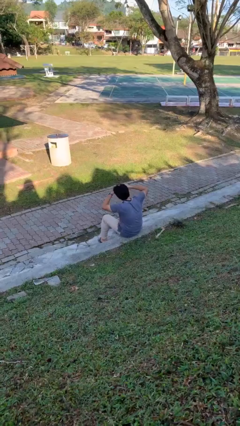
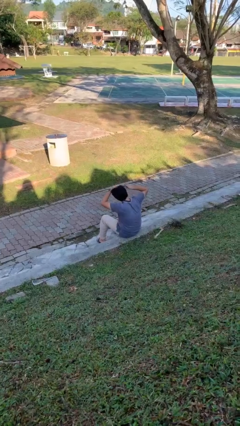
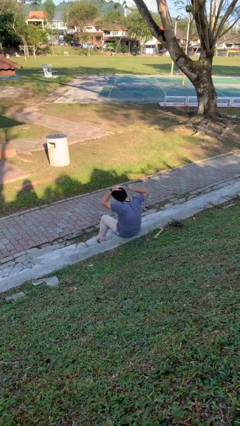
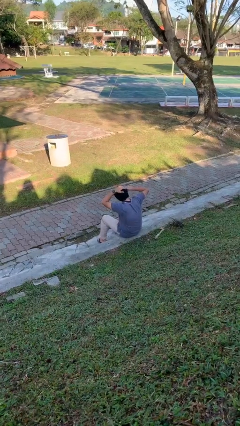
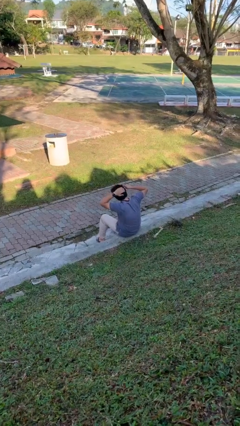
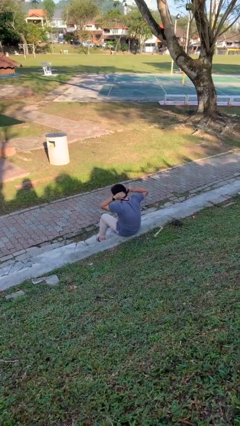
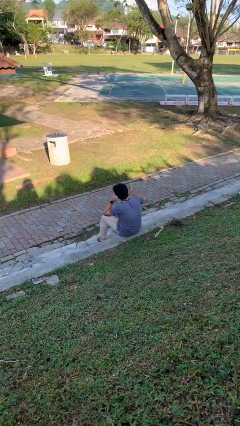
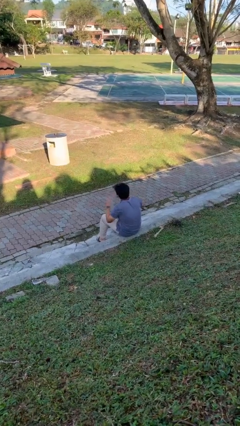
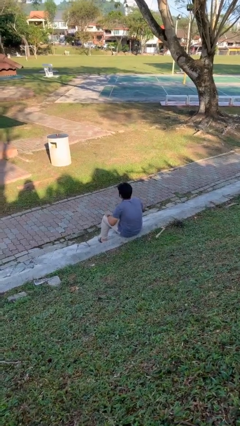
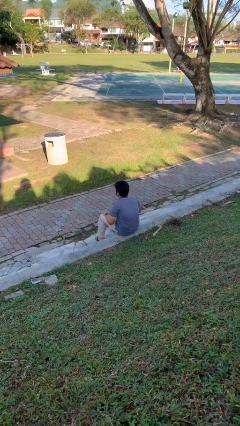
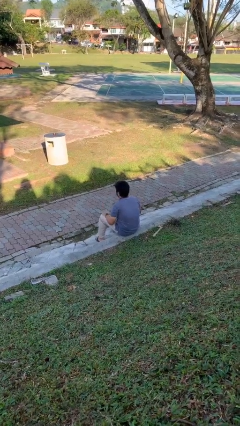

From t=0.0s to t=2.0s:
person brushes hair

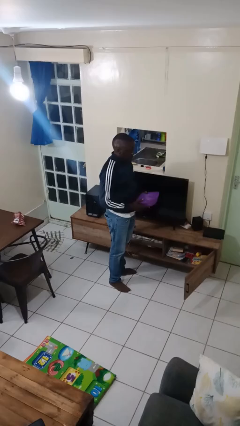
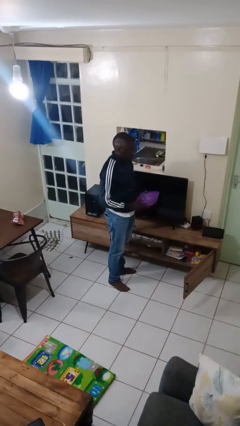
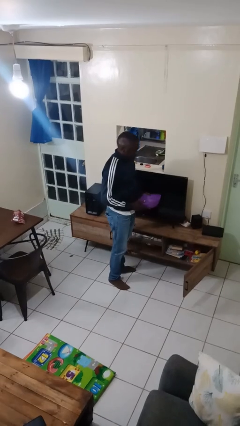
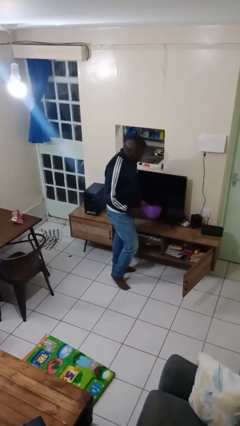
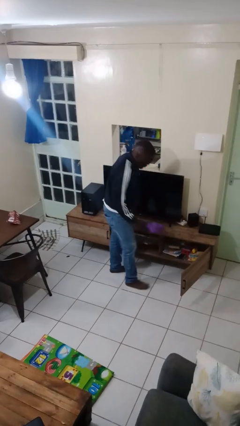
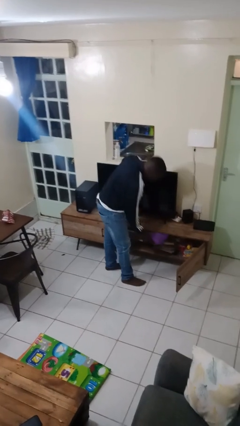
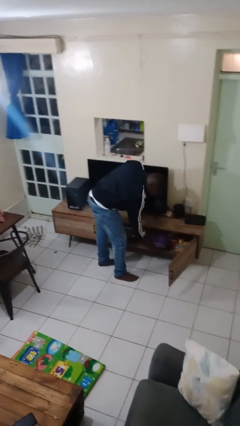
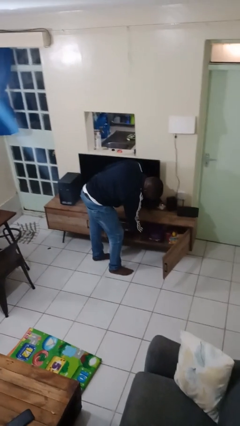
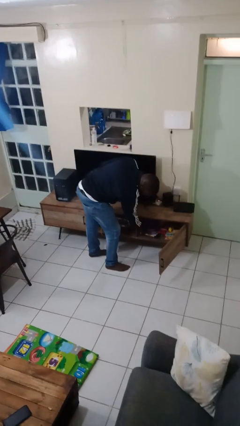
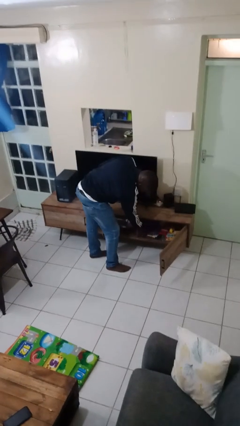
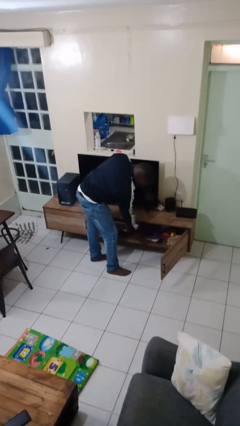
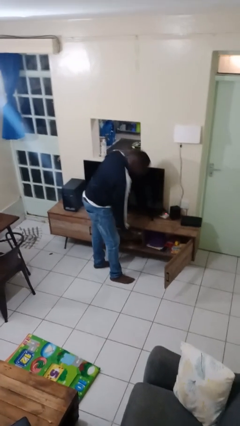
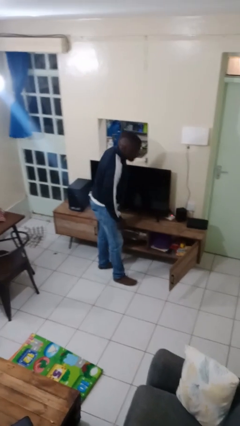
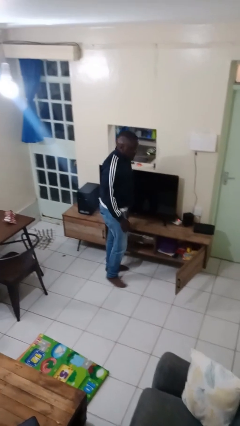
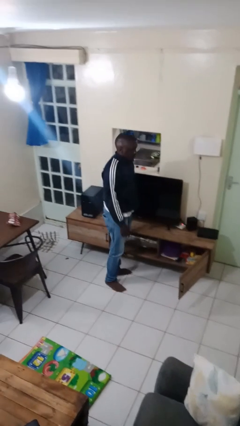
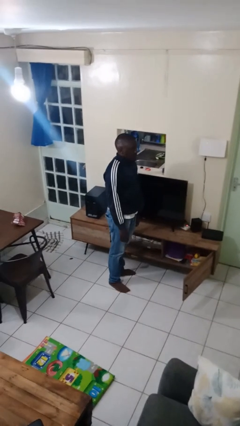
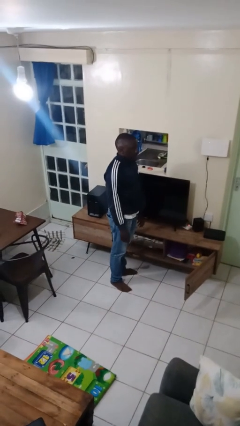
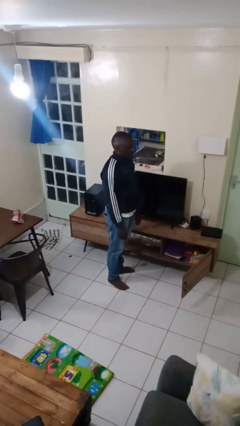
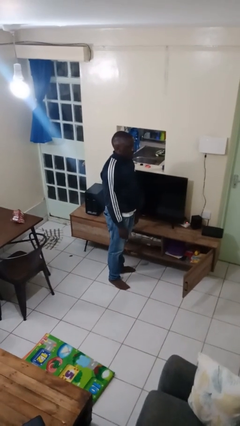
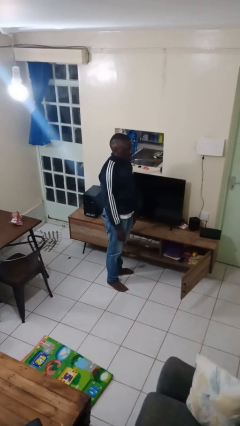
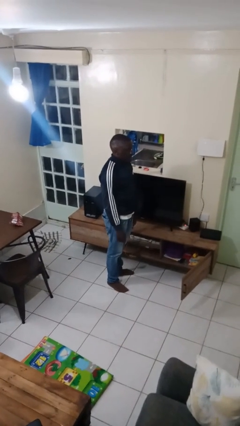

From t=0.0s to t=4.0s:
person puts down object into cabinet

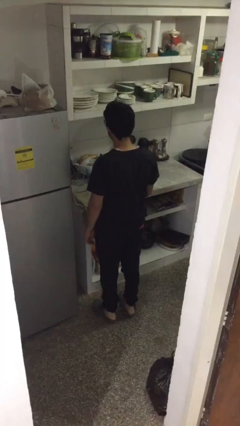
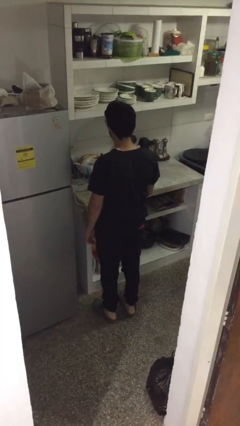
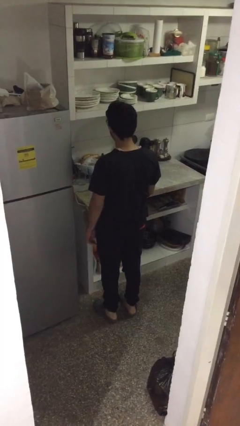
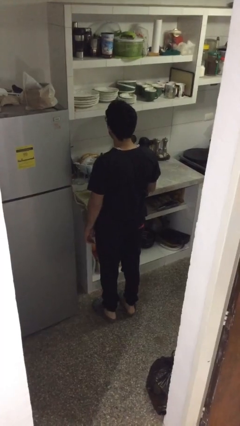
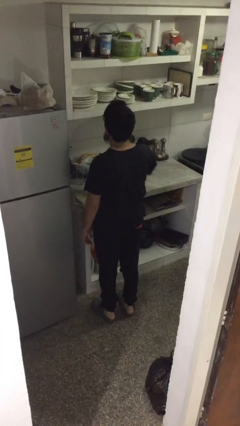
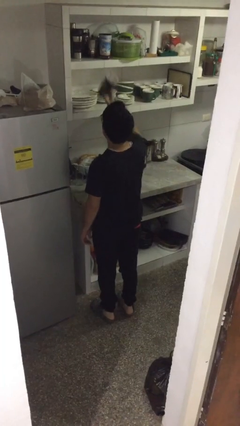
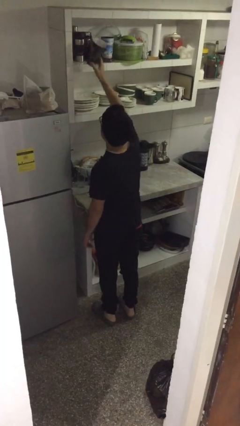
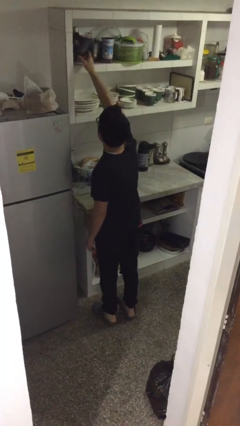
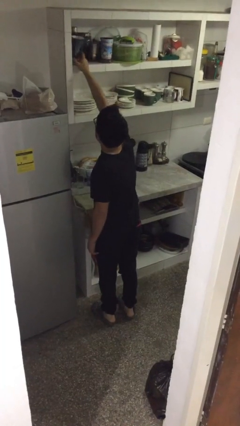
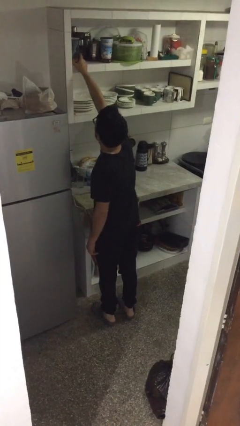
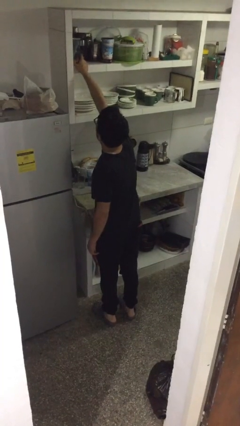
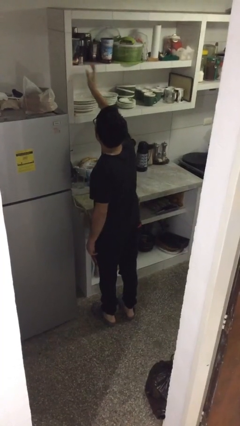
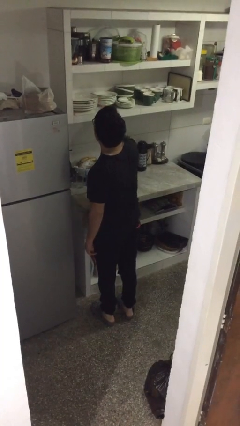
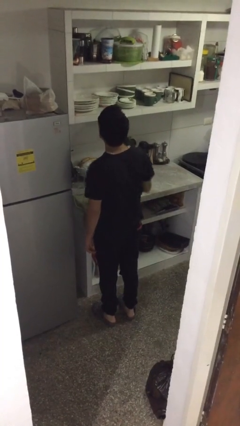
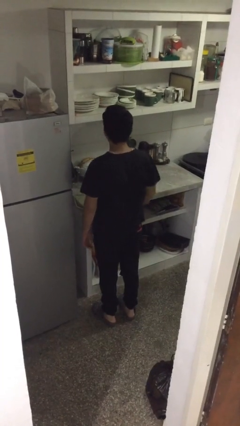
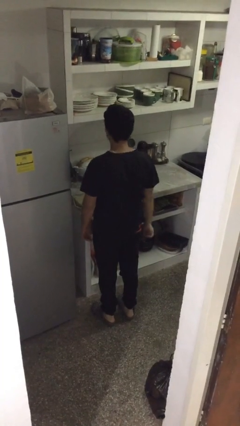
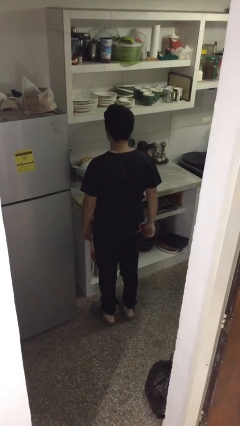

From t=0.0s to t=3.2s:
person puts down object on shelf

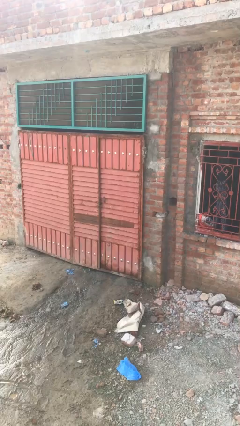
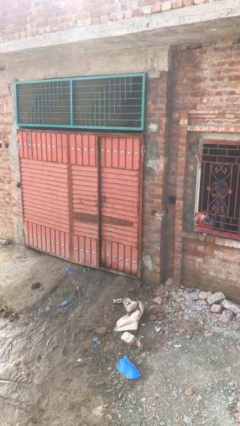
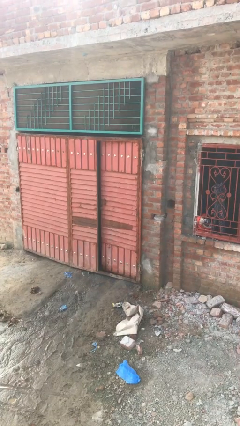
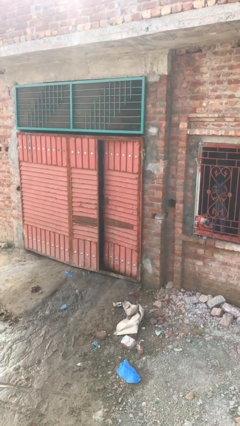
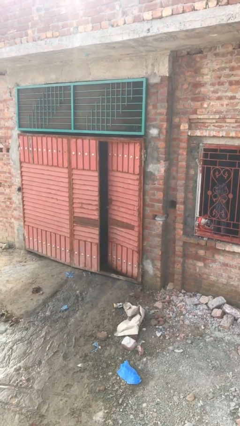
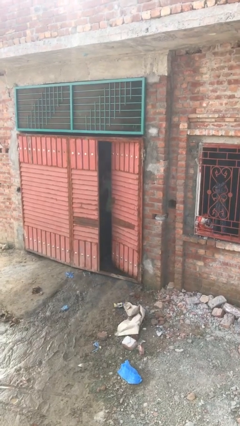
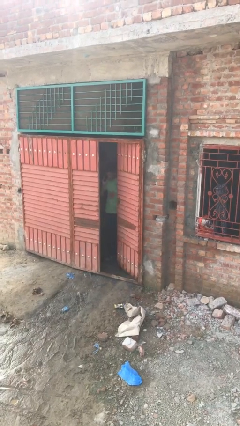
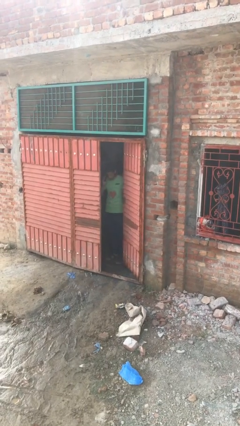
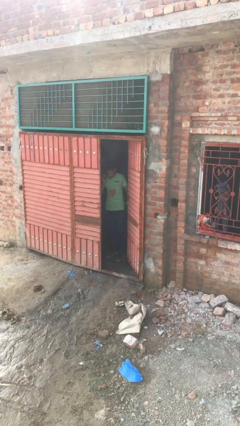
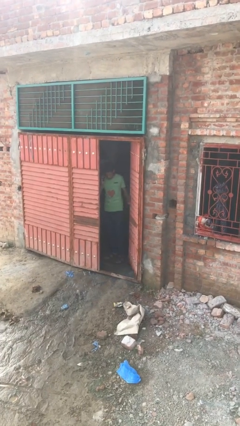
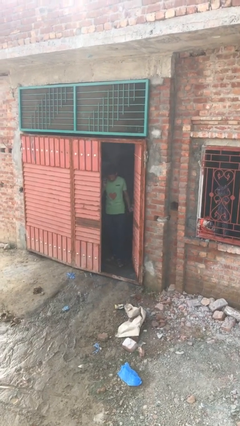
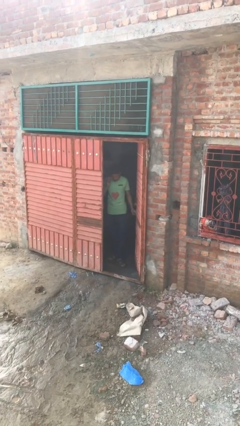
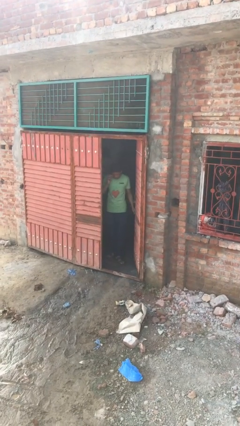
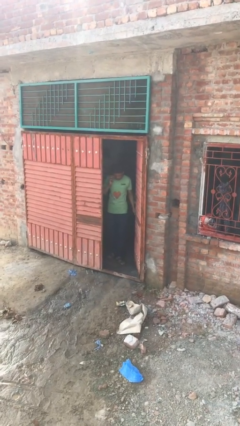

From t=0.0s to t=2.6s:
person opens facility door

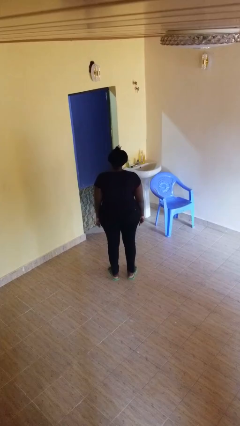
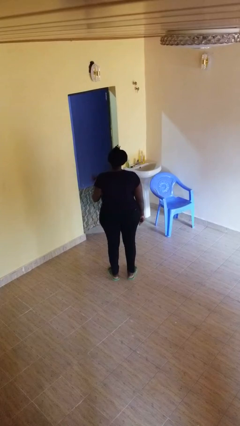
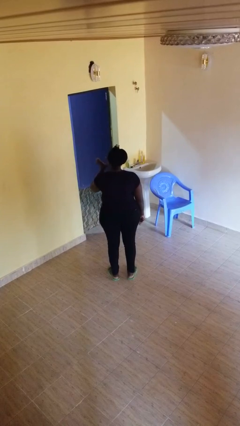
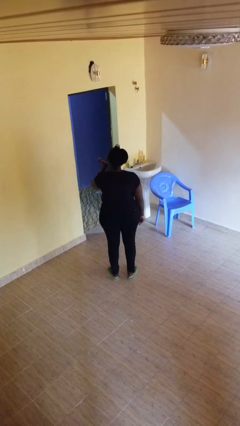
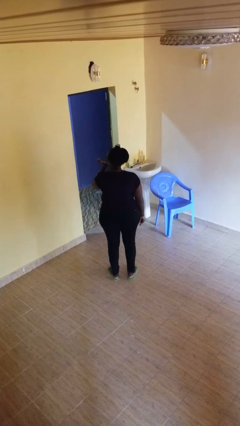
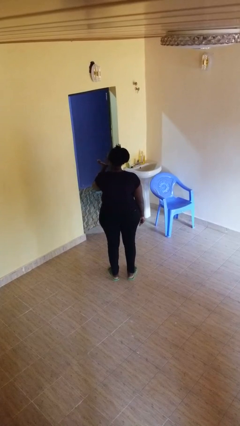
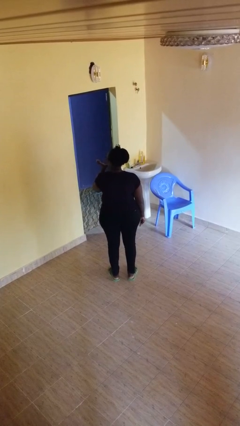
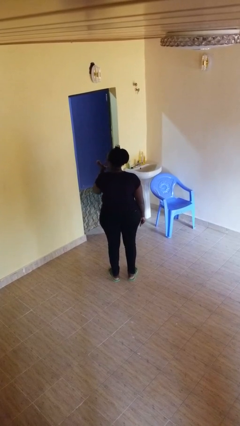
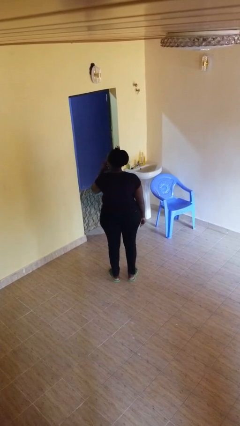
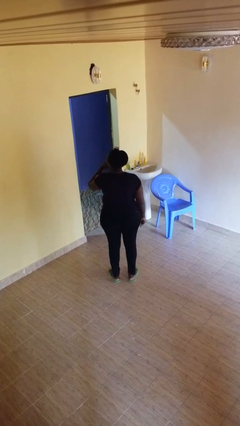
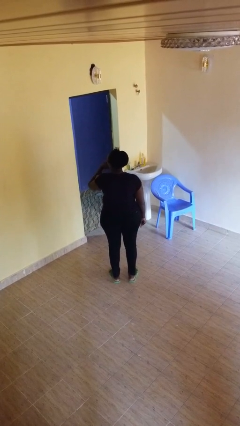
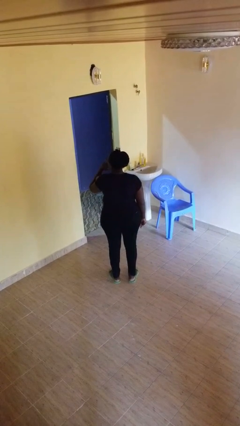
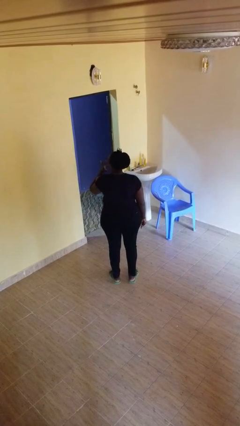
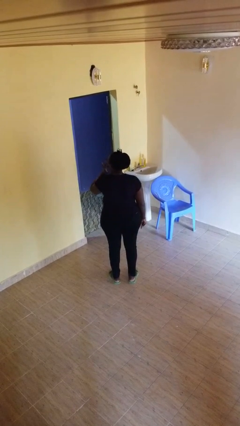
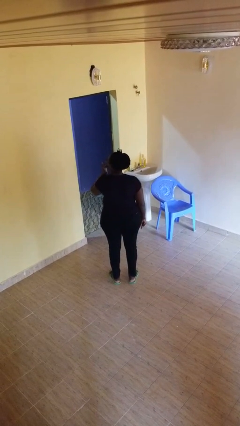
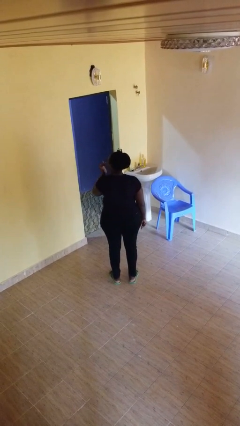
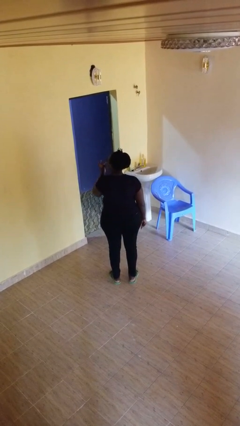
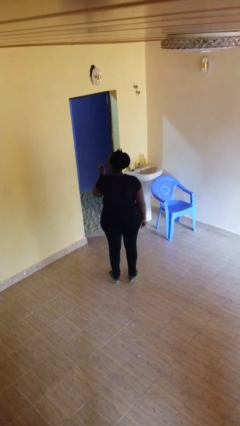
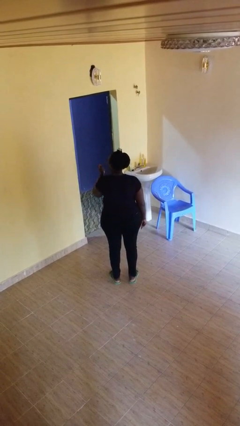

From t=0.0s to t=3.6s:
person licks fingers

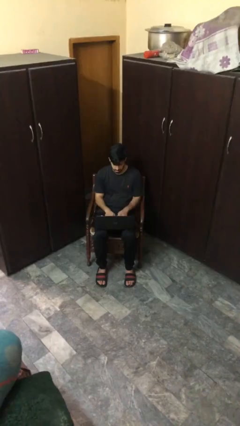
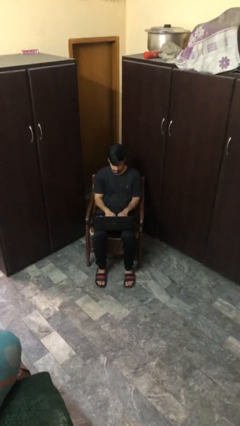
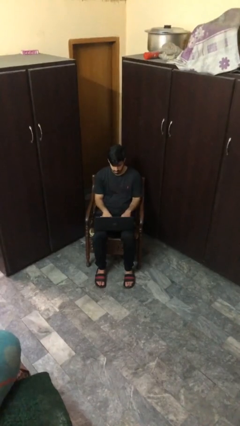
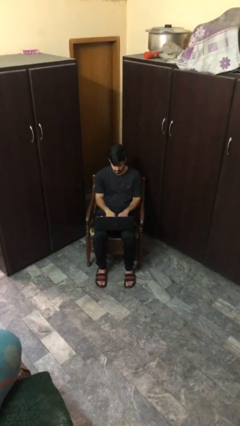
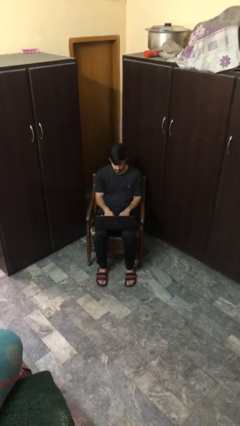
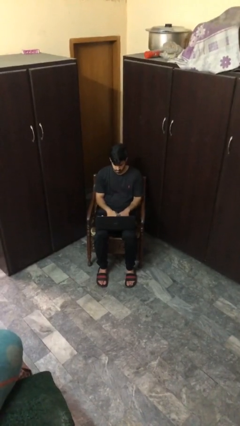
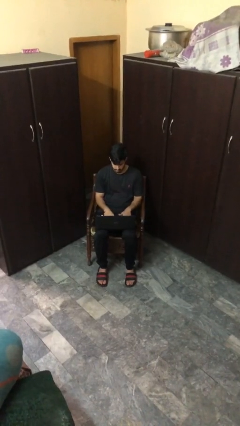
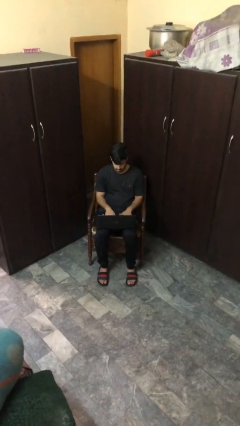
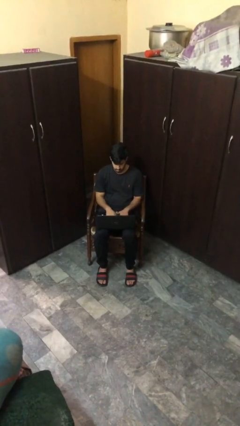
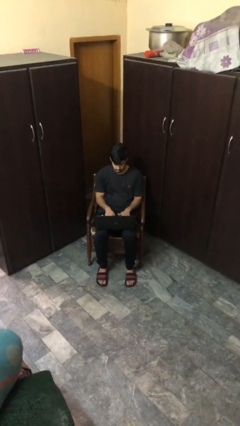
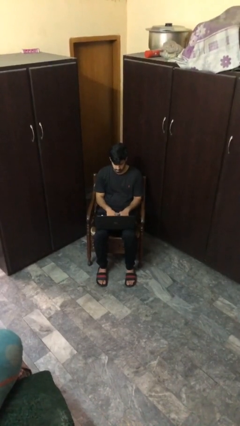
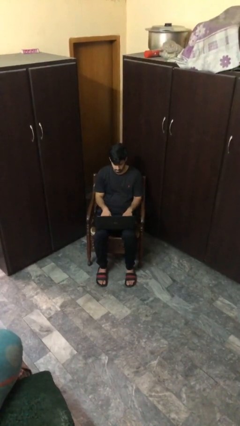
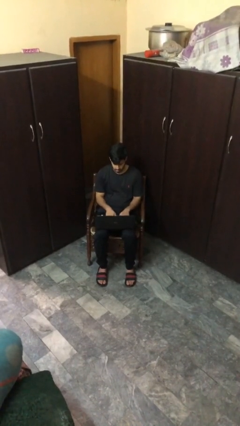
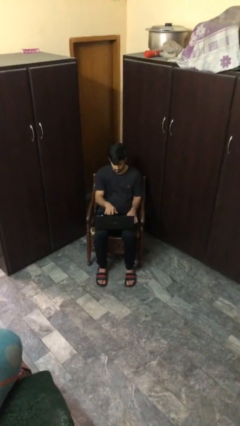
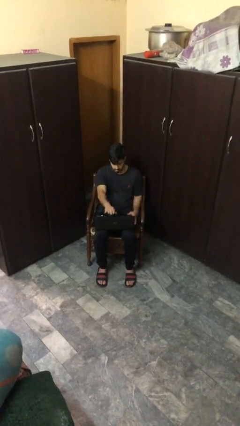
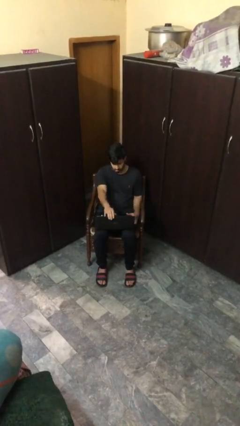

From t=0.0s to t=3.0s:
person interacts with laptop
